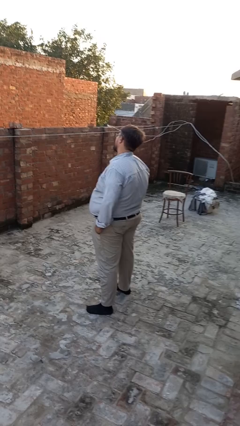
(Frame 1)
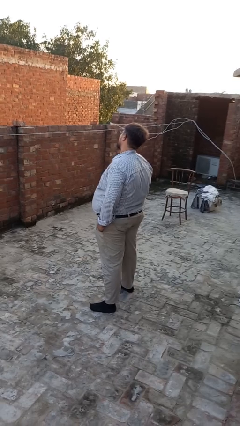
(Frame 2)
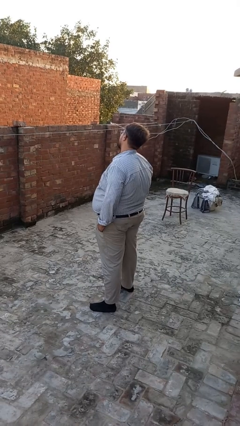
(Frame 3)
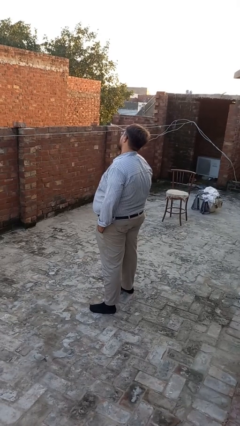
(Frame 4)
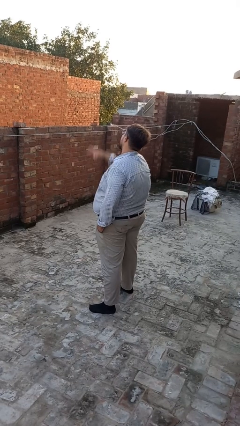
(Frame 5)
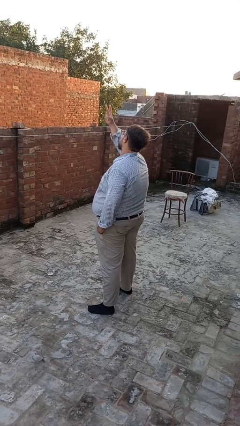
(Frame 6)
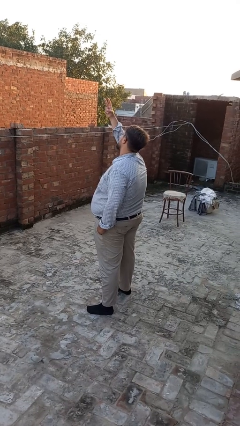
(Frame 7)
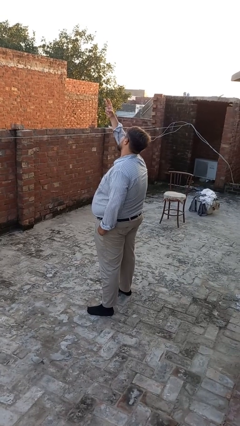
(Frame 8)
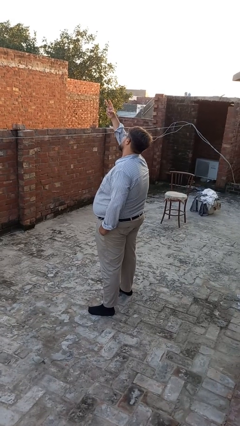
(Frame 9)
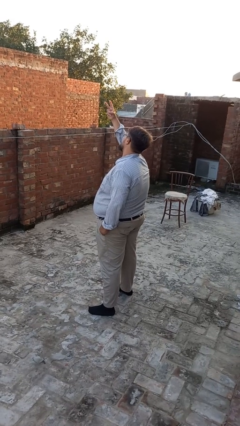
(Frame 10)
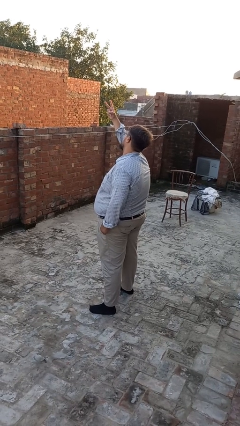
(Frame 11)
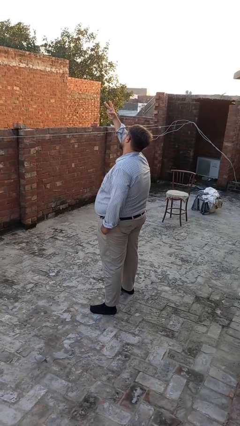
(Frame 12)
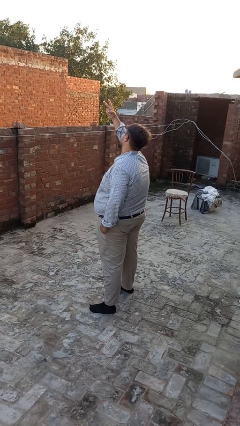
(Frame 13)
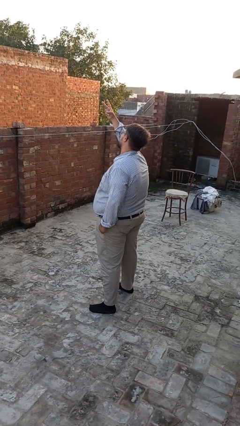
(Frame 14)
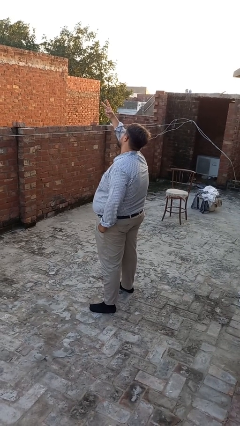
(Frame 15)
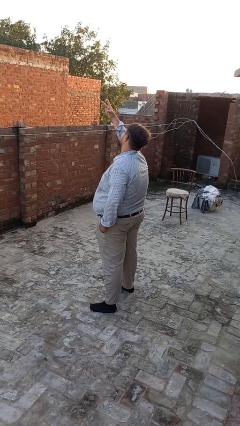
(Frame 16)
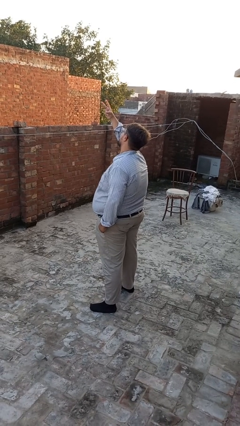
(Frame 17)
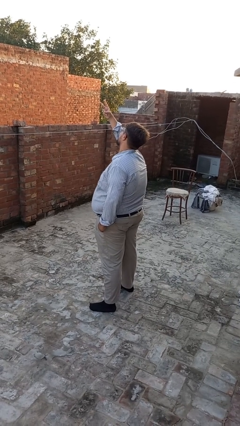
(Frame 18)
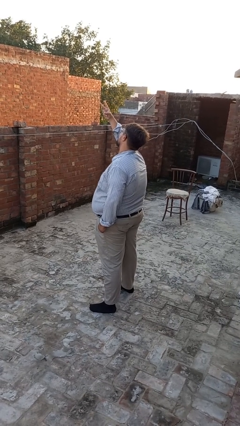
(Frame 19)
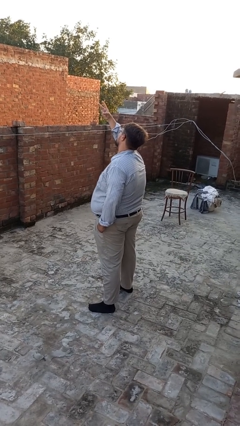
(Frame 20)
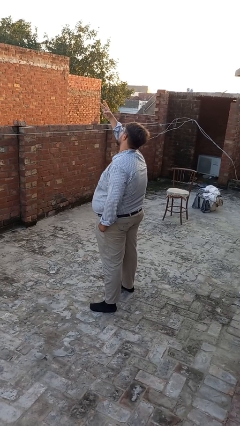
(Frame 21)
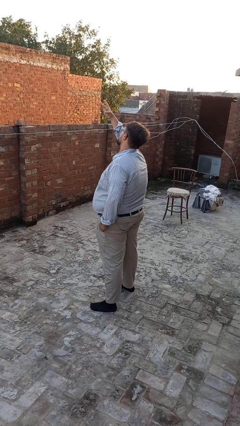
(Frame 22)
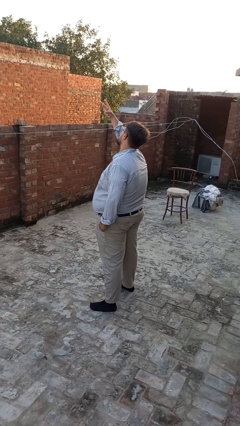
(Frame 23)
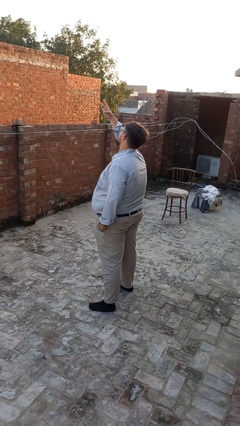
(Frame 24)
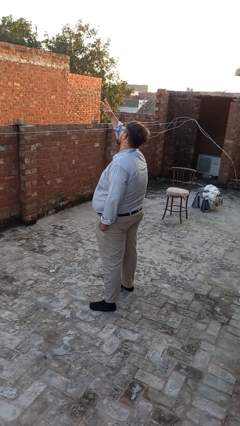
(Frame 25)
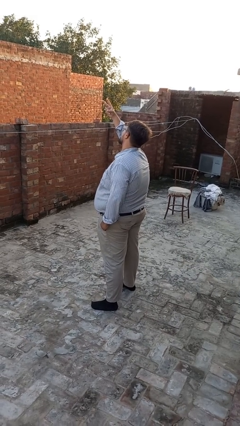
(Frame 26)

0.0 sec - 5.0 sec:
person gestures peace

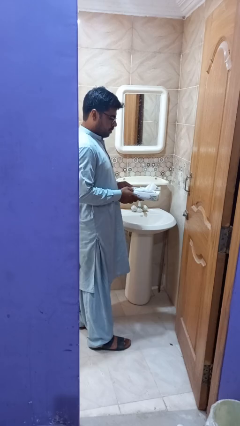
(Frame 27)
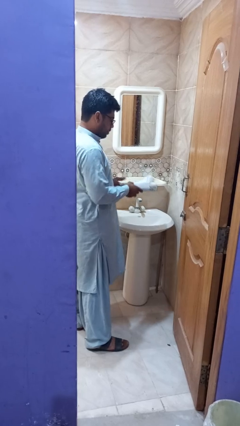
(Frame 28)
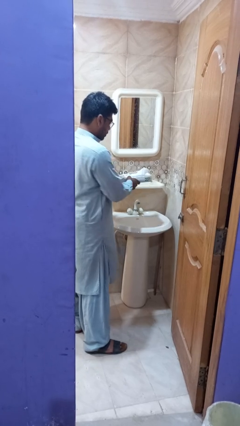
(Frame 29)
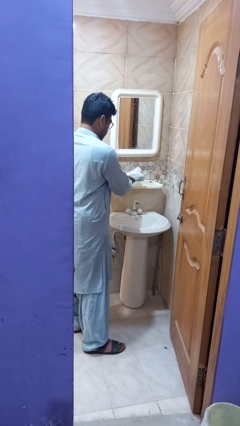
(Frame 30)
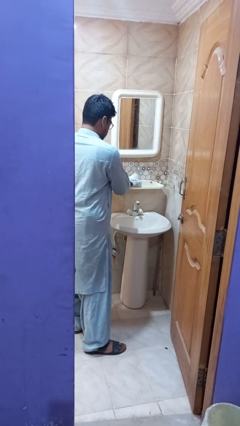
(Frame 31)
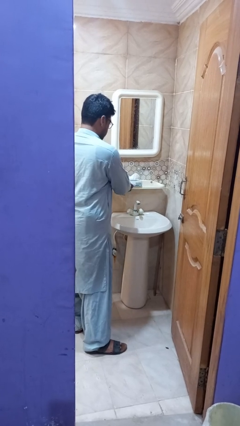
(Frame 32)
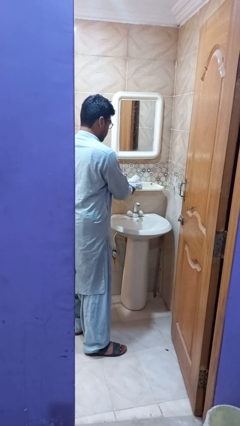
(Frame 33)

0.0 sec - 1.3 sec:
person puts down object on countertop

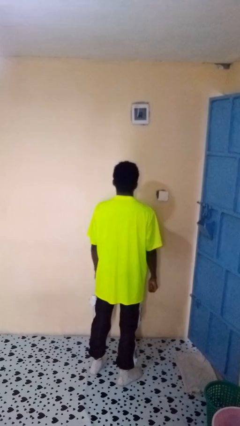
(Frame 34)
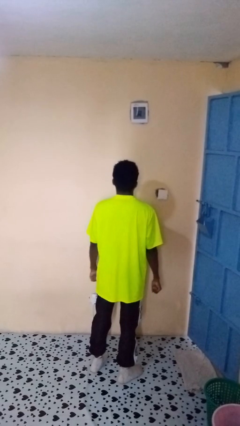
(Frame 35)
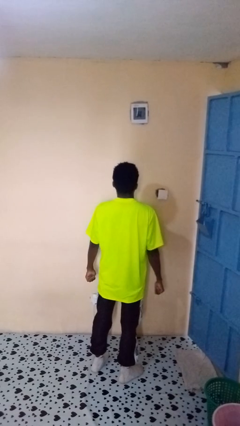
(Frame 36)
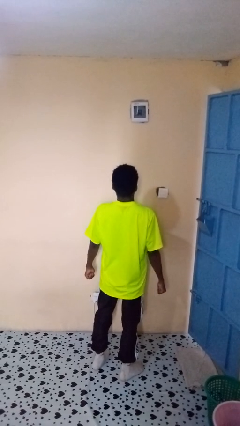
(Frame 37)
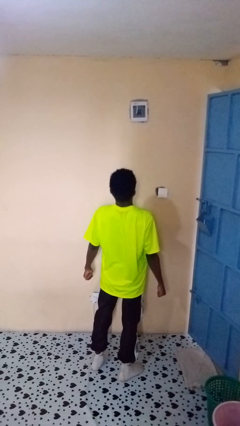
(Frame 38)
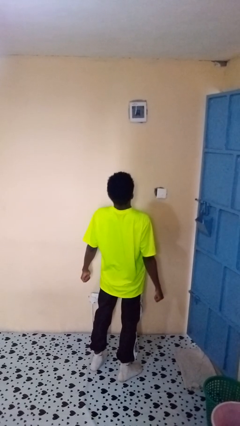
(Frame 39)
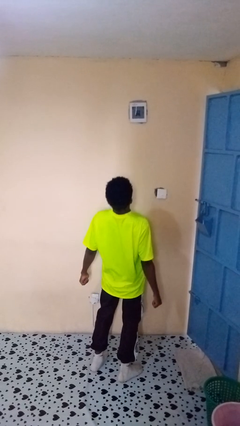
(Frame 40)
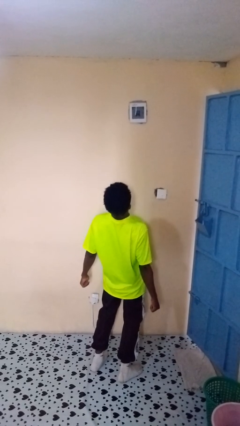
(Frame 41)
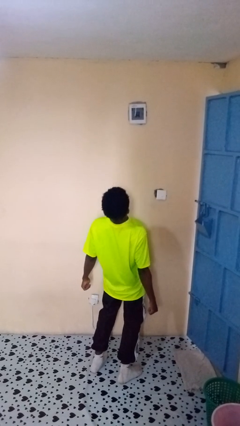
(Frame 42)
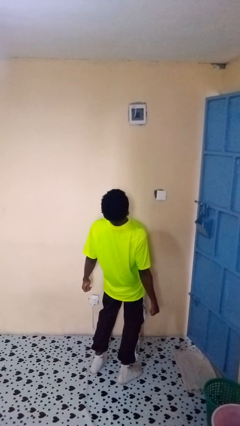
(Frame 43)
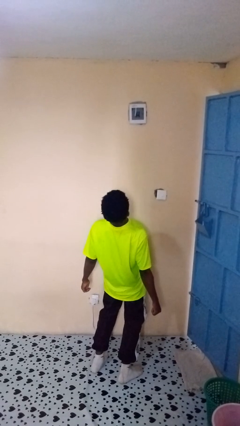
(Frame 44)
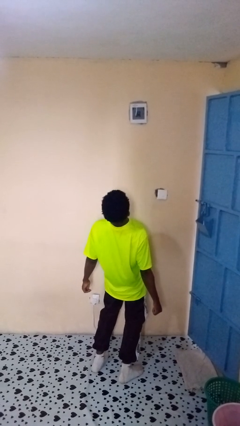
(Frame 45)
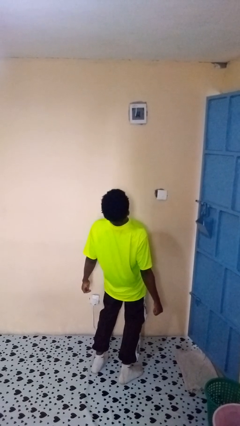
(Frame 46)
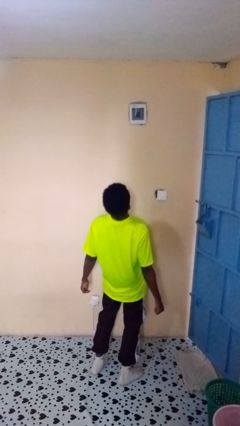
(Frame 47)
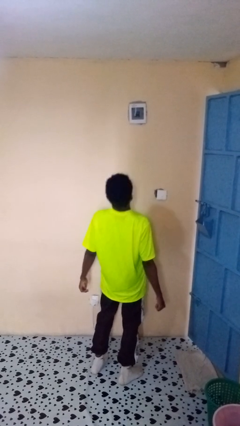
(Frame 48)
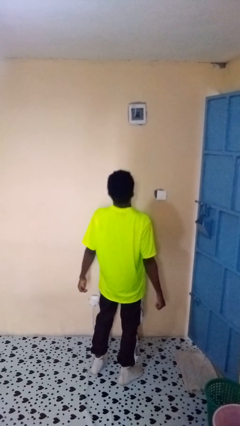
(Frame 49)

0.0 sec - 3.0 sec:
person stretches back

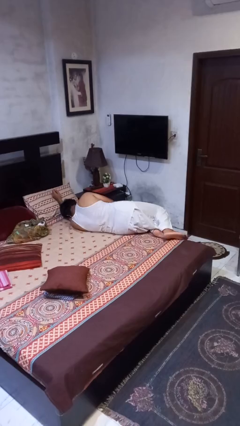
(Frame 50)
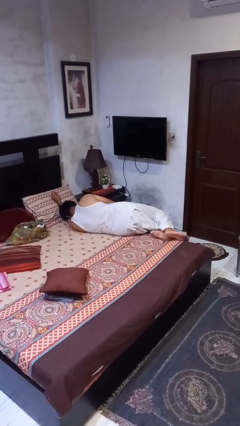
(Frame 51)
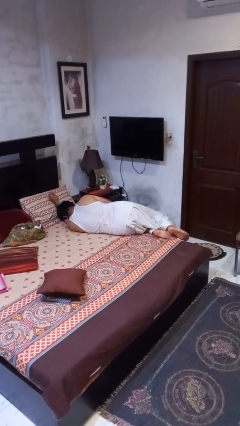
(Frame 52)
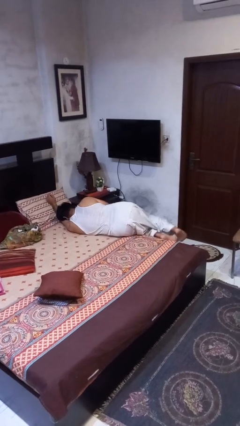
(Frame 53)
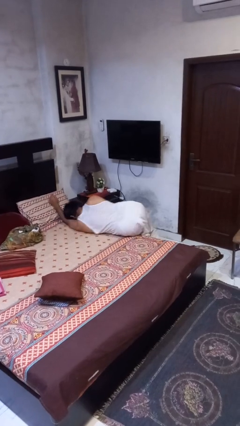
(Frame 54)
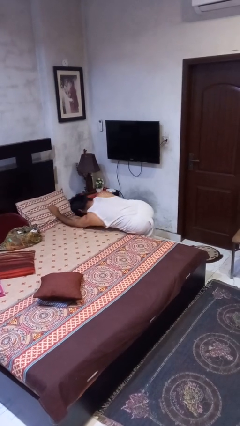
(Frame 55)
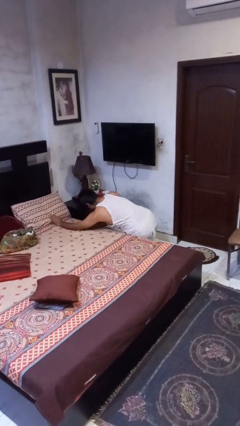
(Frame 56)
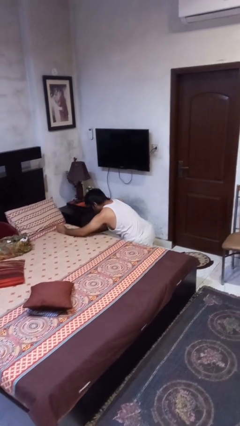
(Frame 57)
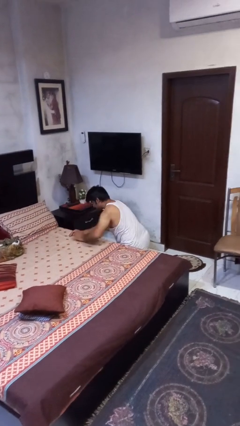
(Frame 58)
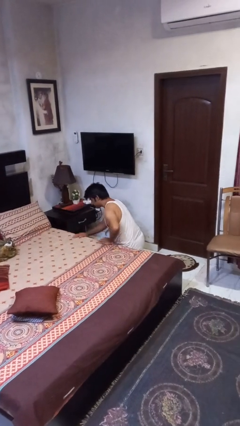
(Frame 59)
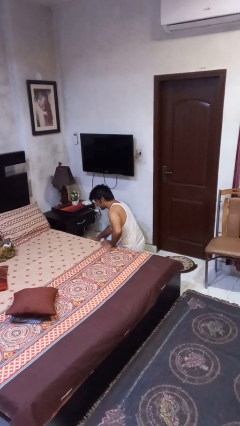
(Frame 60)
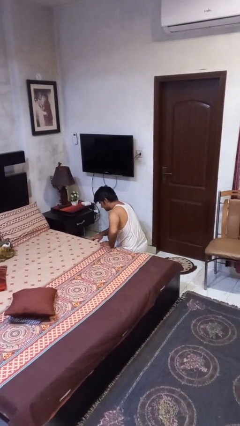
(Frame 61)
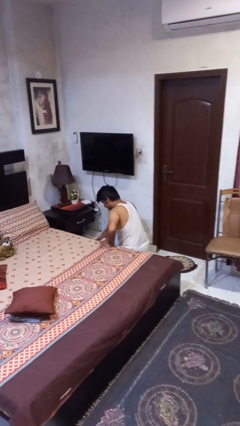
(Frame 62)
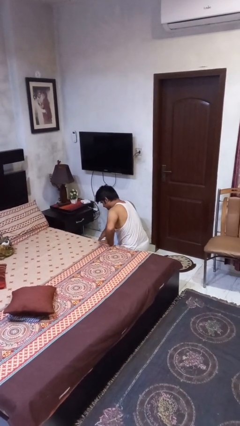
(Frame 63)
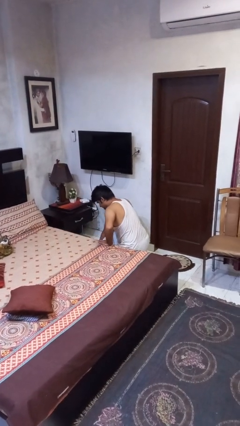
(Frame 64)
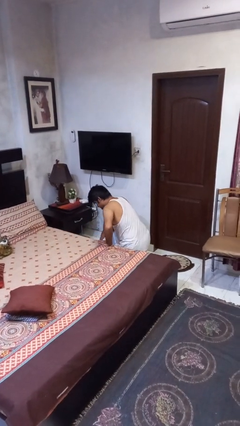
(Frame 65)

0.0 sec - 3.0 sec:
person falls from bed

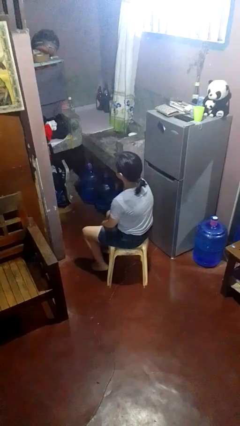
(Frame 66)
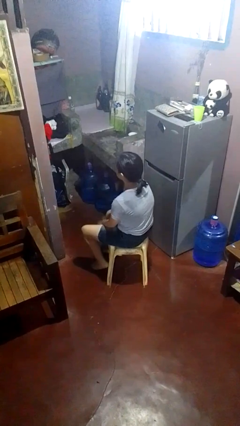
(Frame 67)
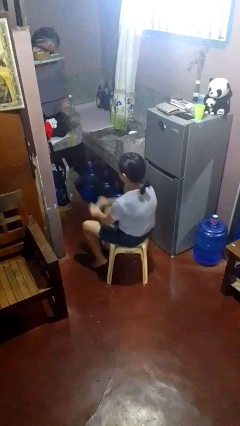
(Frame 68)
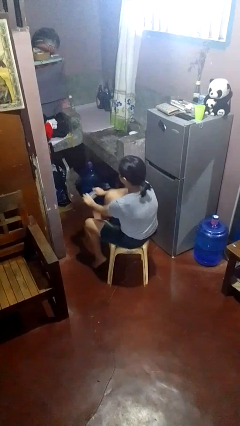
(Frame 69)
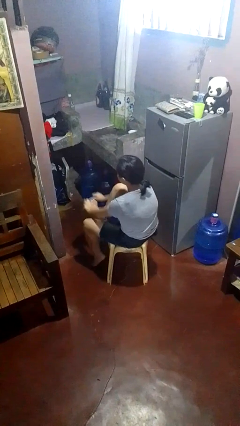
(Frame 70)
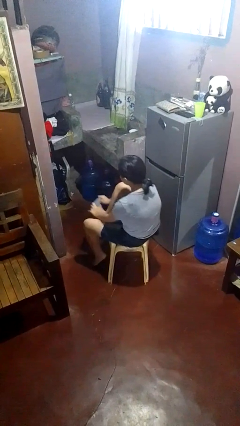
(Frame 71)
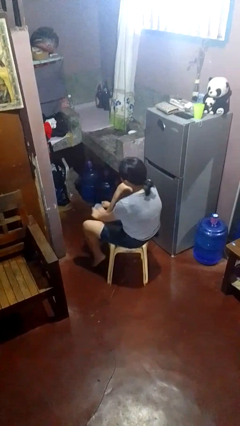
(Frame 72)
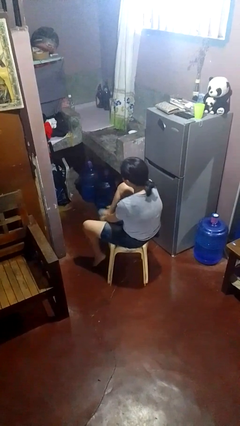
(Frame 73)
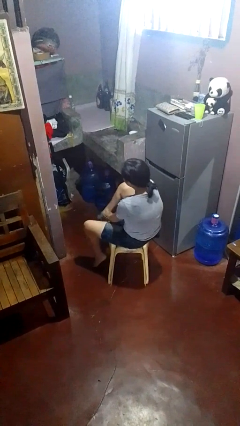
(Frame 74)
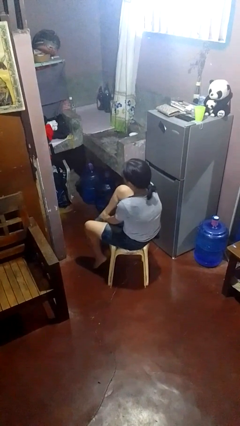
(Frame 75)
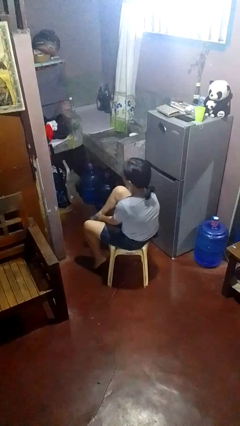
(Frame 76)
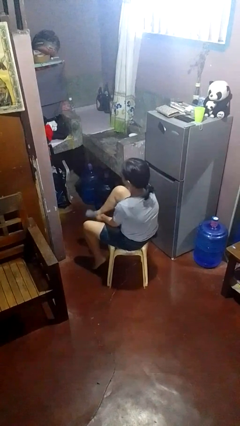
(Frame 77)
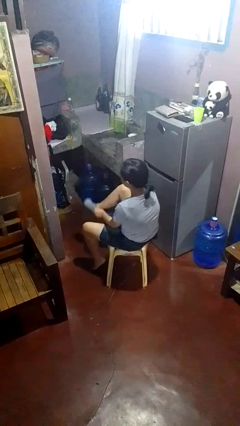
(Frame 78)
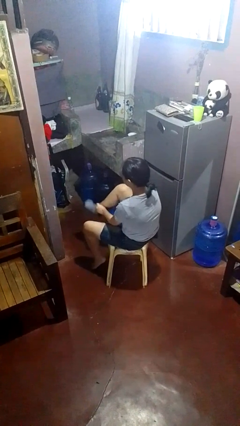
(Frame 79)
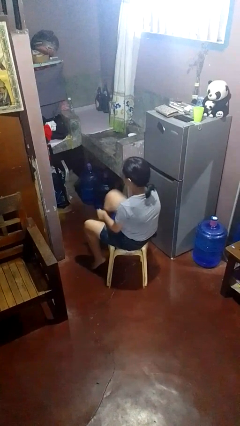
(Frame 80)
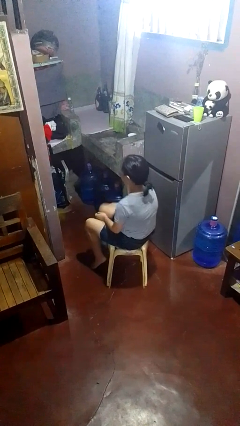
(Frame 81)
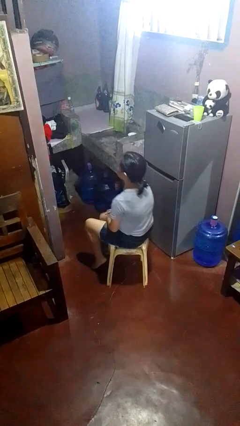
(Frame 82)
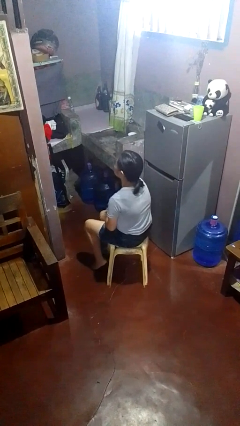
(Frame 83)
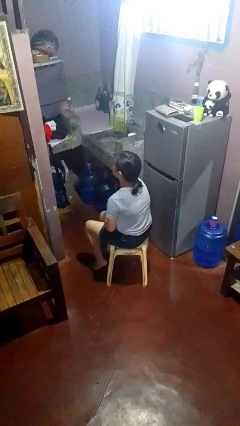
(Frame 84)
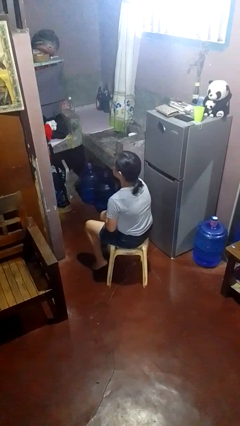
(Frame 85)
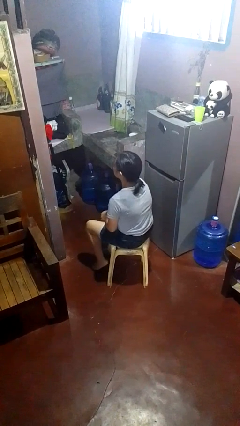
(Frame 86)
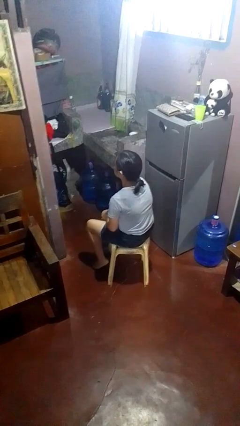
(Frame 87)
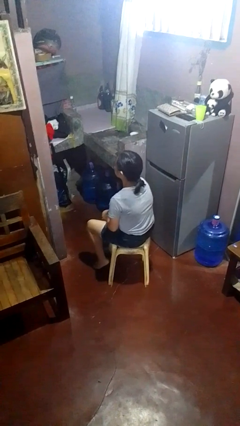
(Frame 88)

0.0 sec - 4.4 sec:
person puts on socks

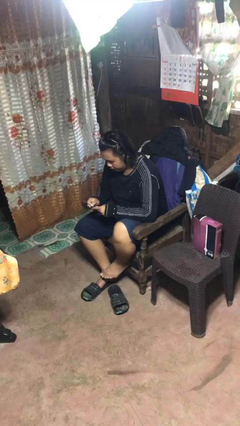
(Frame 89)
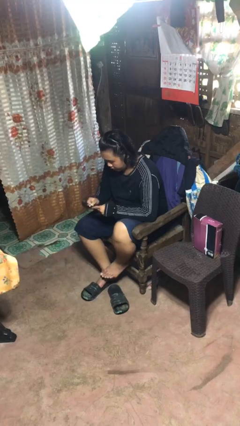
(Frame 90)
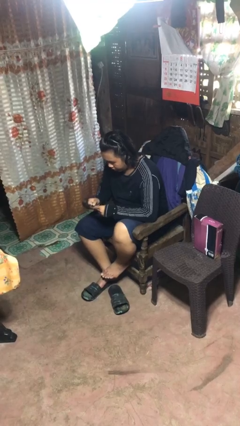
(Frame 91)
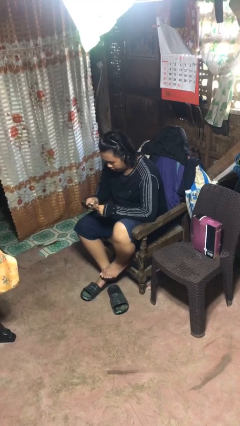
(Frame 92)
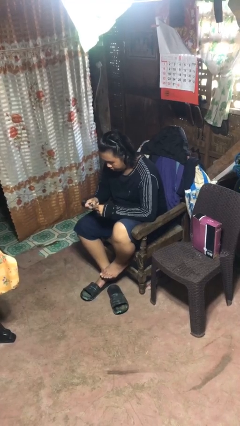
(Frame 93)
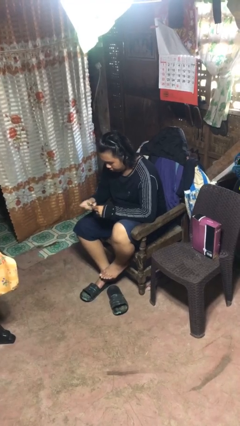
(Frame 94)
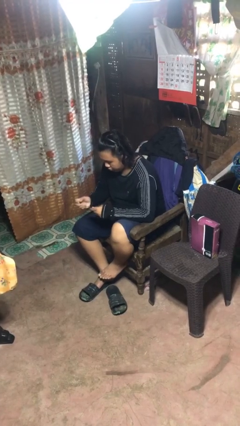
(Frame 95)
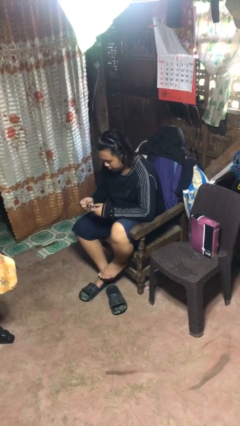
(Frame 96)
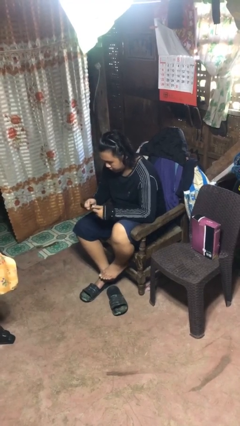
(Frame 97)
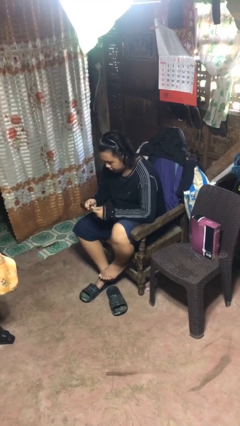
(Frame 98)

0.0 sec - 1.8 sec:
person files fingernails
